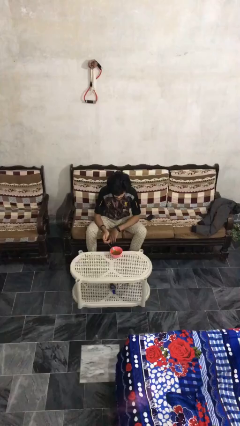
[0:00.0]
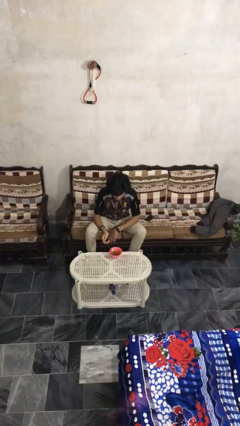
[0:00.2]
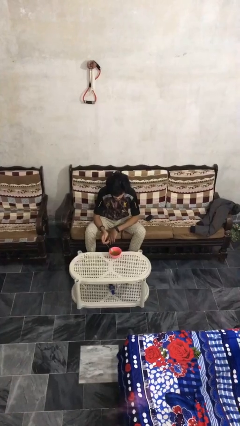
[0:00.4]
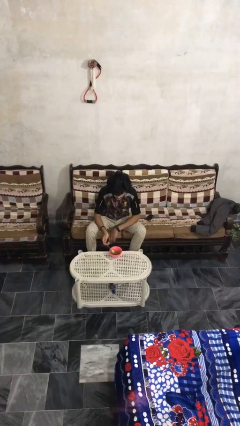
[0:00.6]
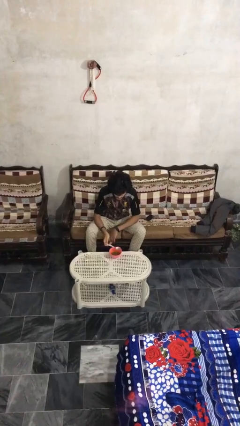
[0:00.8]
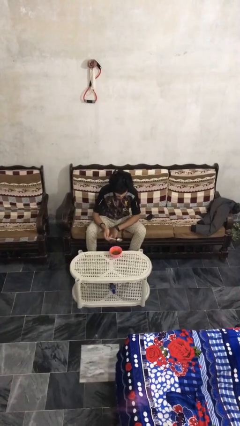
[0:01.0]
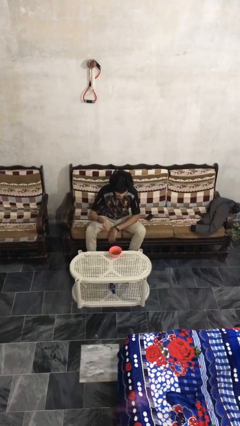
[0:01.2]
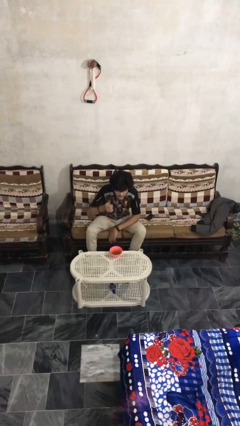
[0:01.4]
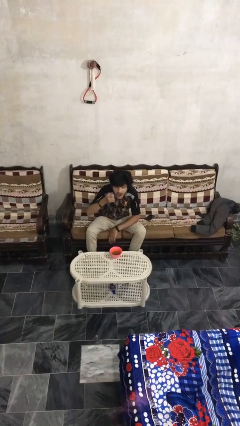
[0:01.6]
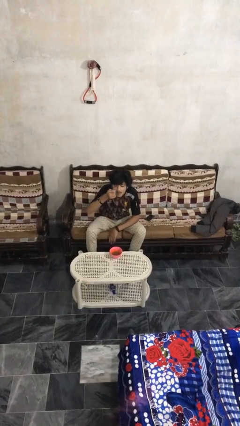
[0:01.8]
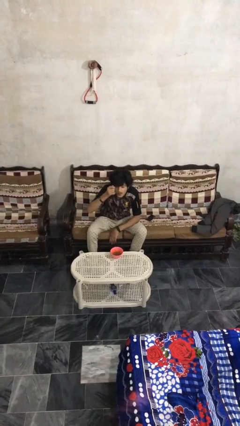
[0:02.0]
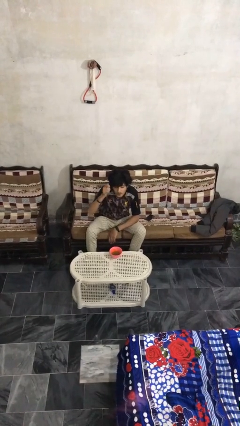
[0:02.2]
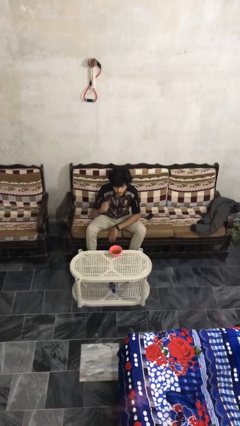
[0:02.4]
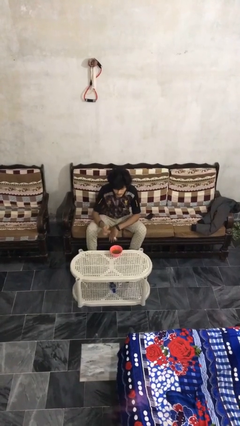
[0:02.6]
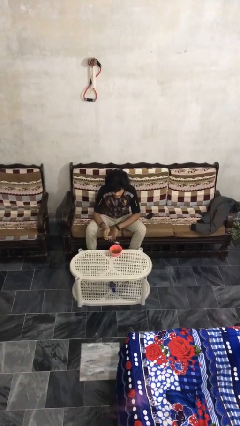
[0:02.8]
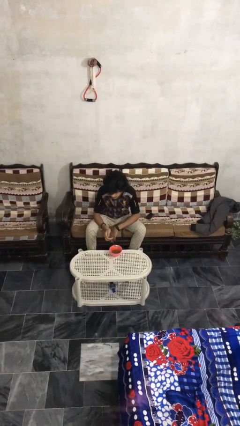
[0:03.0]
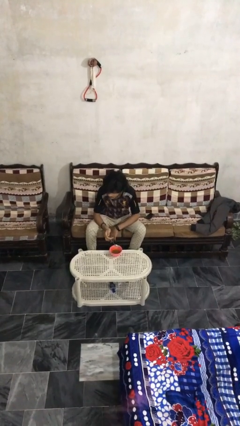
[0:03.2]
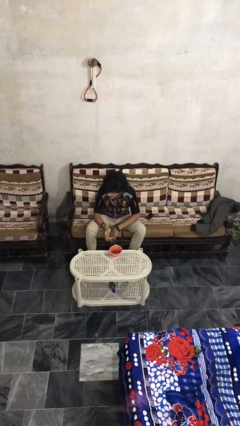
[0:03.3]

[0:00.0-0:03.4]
person eats with utensil

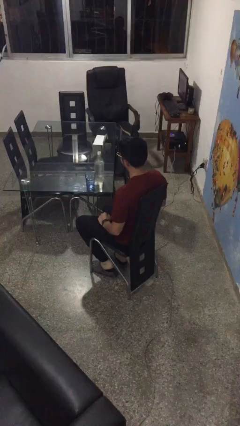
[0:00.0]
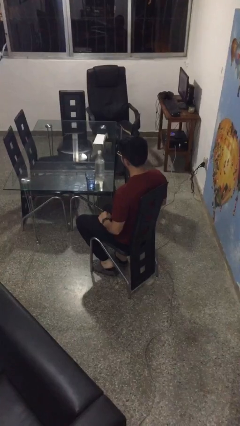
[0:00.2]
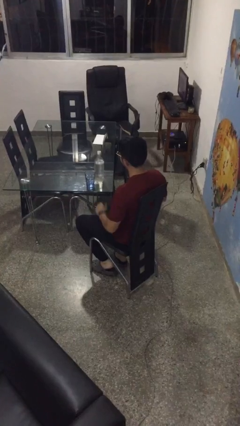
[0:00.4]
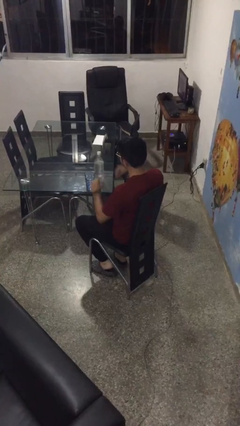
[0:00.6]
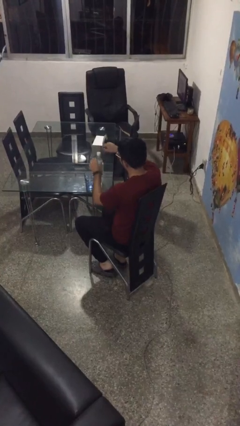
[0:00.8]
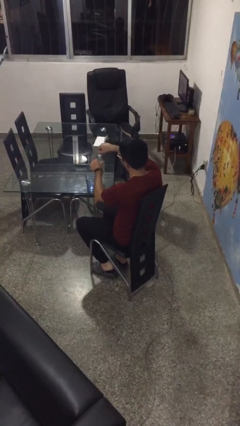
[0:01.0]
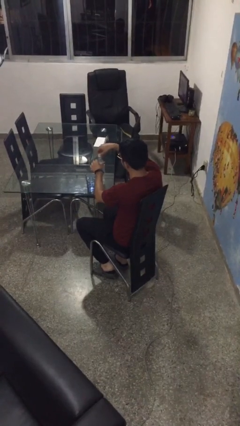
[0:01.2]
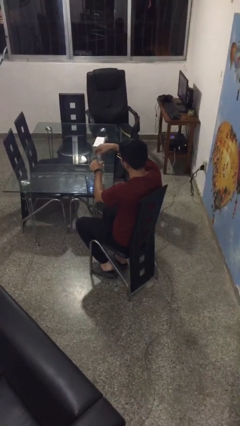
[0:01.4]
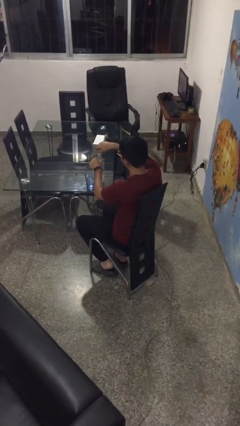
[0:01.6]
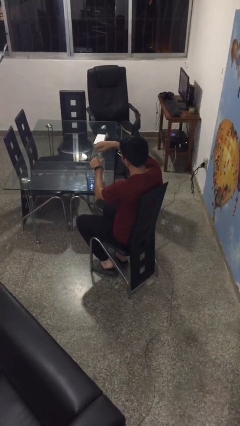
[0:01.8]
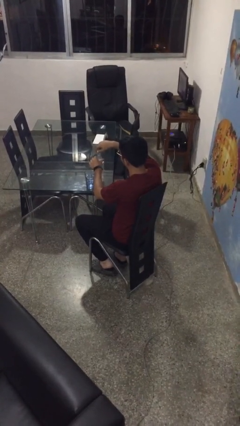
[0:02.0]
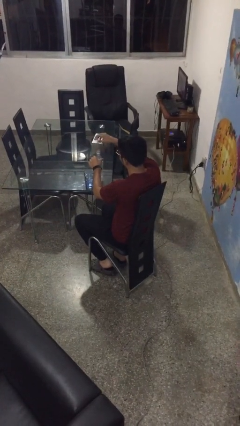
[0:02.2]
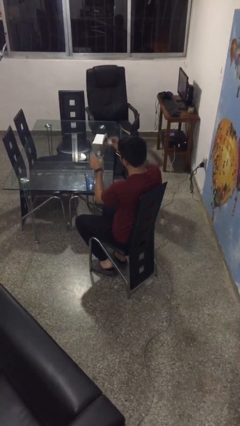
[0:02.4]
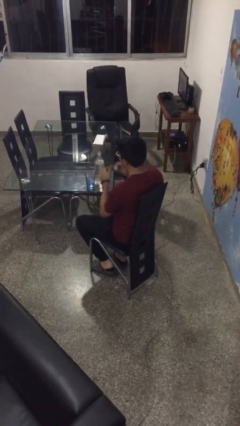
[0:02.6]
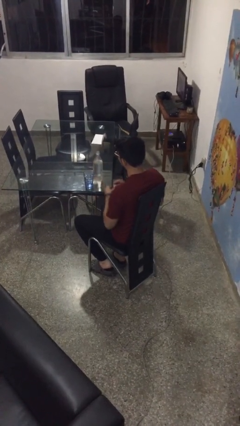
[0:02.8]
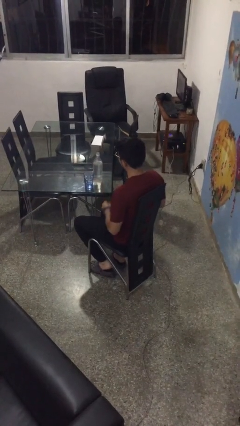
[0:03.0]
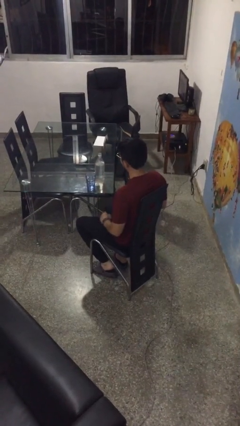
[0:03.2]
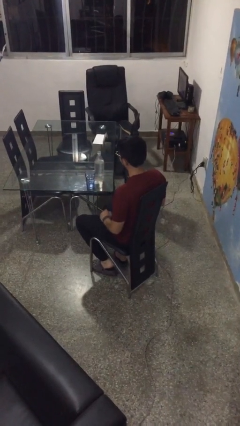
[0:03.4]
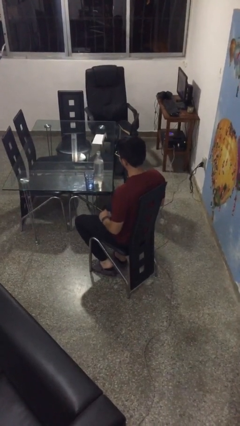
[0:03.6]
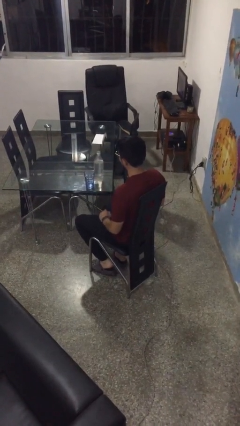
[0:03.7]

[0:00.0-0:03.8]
person unscrews lid from bottle

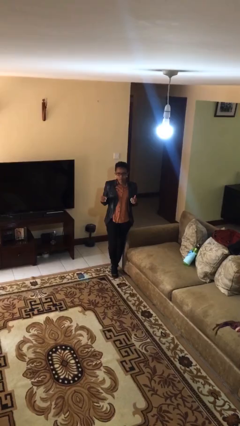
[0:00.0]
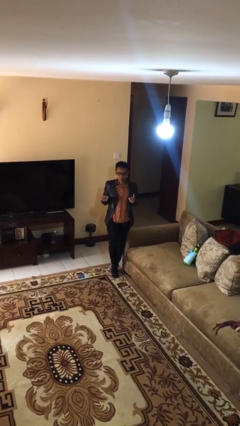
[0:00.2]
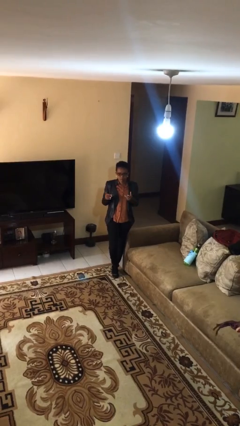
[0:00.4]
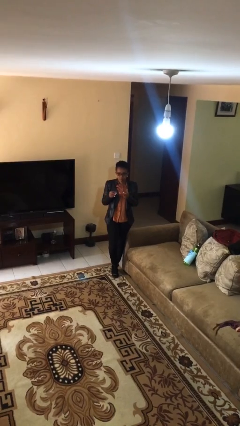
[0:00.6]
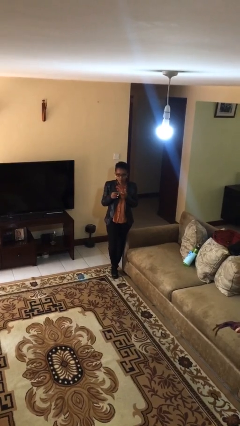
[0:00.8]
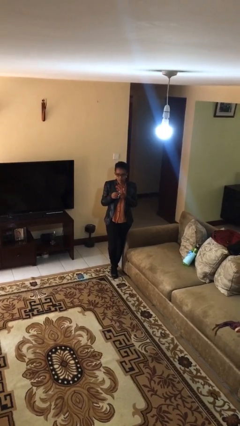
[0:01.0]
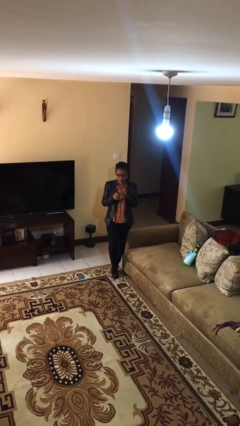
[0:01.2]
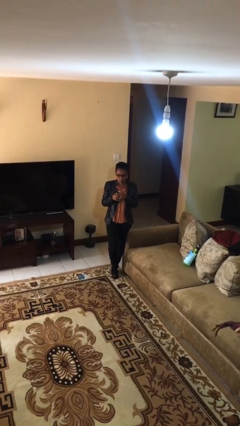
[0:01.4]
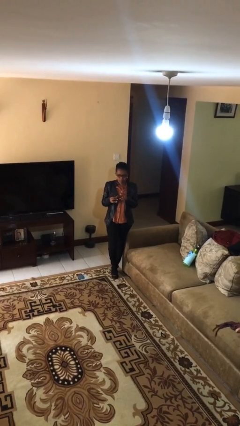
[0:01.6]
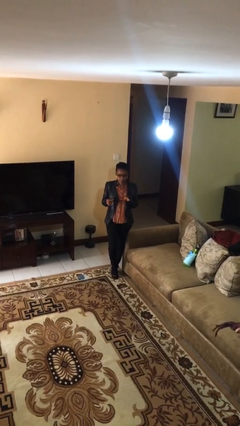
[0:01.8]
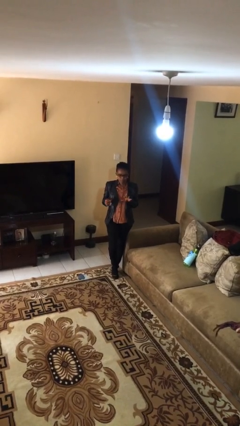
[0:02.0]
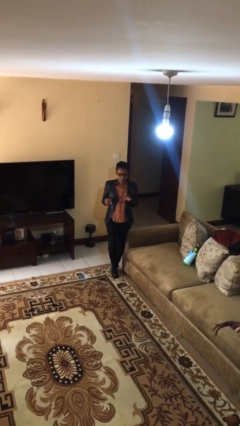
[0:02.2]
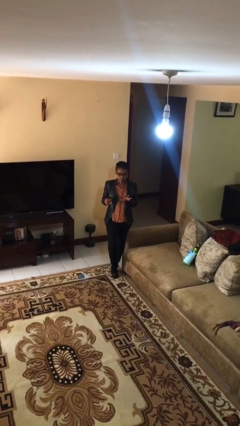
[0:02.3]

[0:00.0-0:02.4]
person puts on ring

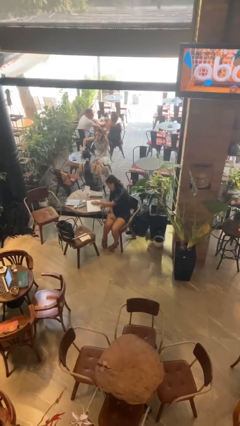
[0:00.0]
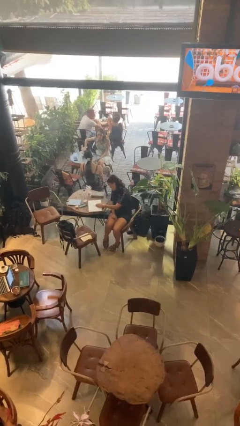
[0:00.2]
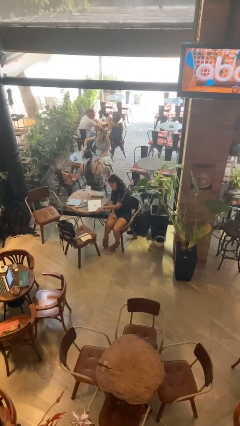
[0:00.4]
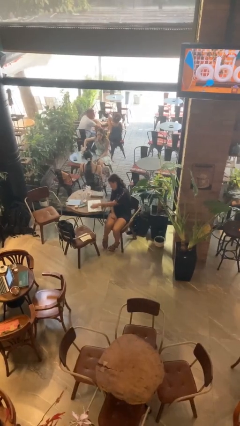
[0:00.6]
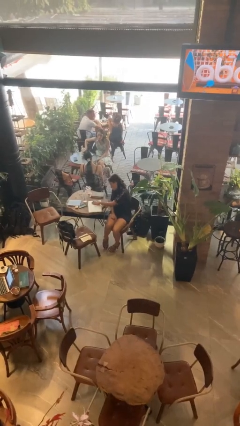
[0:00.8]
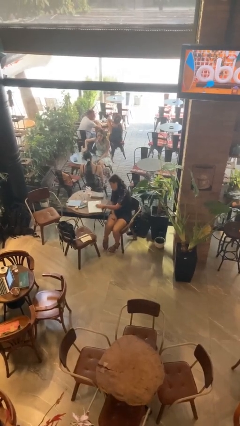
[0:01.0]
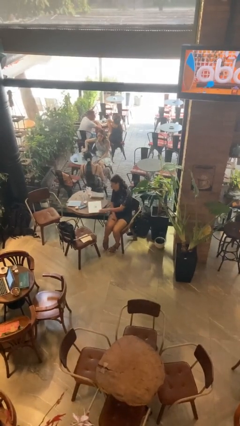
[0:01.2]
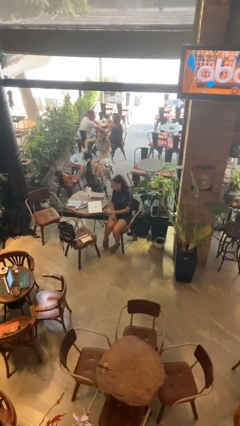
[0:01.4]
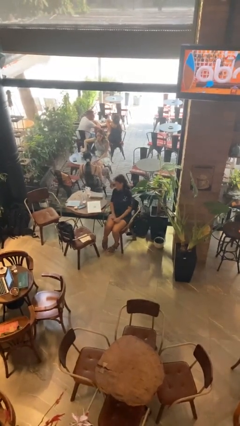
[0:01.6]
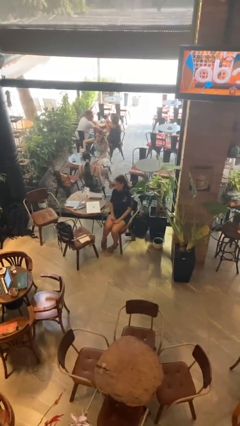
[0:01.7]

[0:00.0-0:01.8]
person waves hand over object

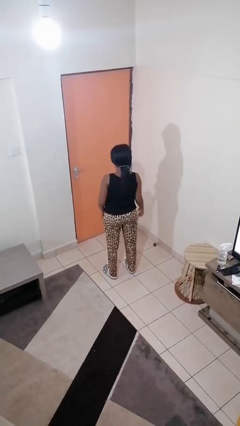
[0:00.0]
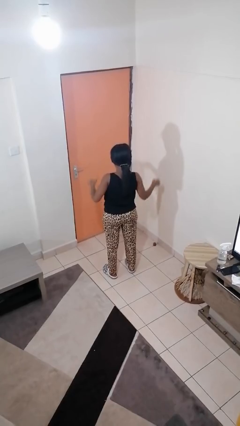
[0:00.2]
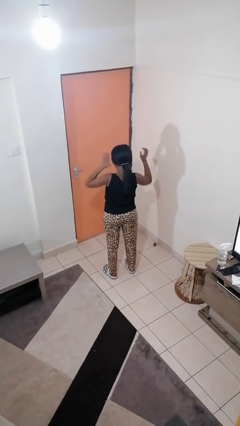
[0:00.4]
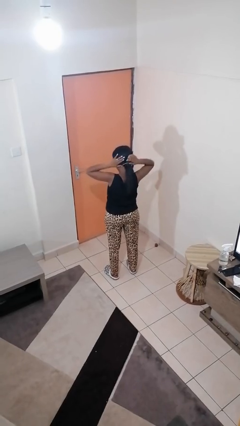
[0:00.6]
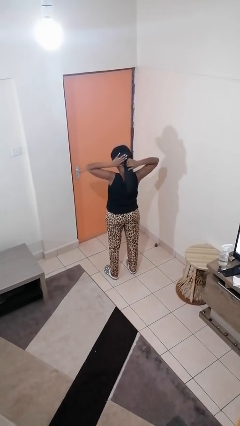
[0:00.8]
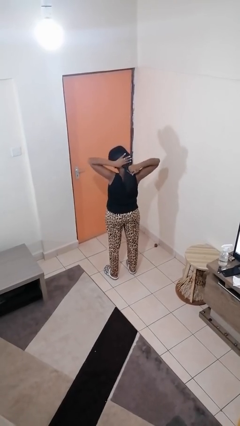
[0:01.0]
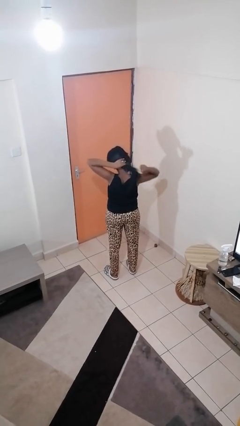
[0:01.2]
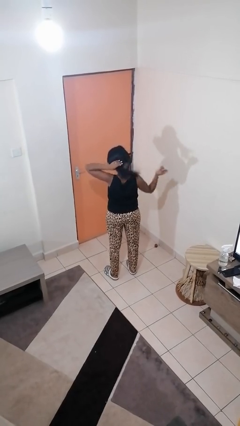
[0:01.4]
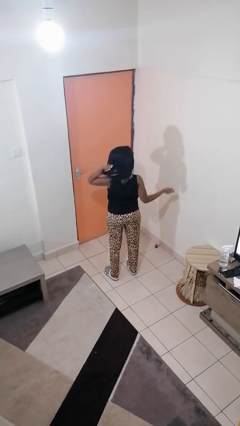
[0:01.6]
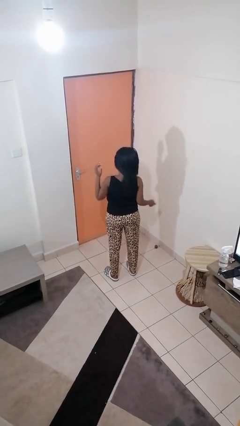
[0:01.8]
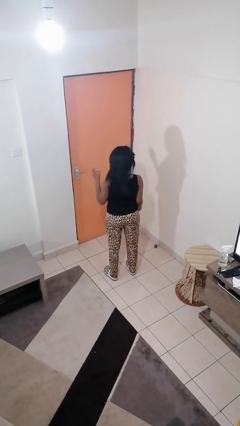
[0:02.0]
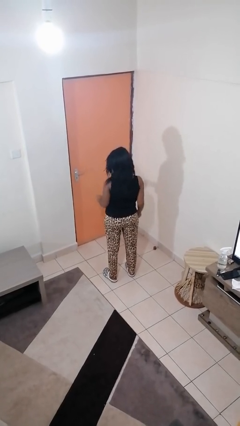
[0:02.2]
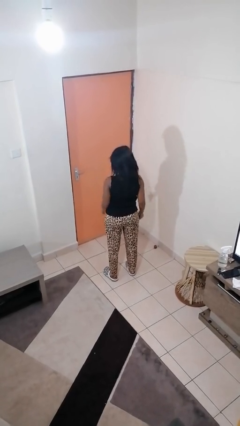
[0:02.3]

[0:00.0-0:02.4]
person takes off hairtie

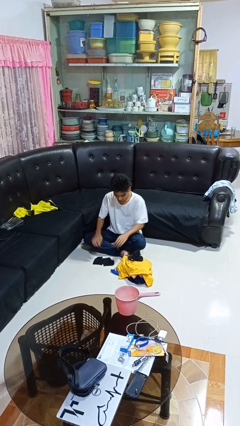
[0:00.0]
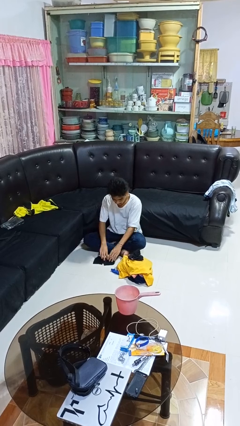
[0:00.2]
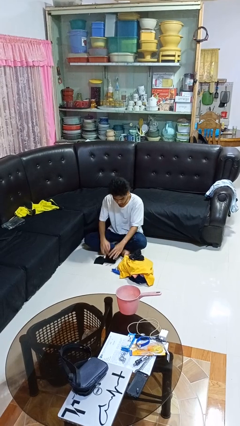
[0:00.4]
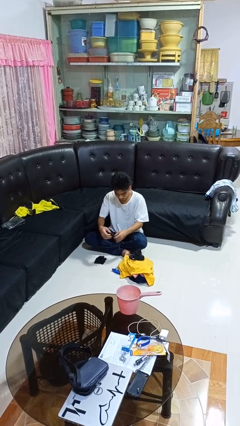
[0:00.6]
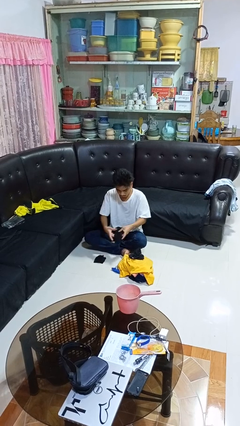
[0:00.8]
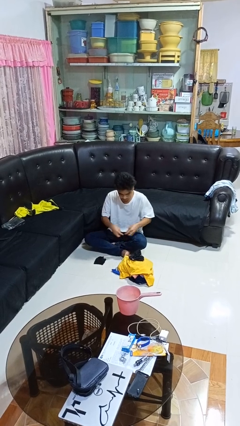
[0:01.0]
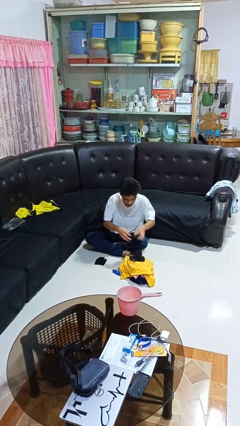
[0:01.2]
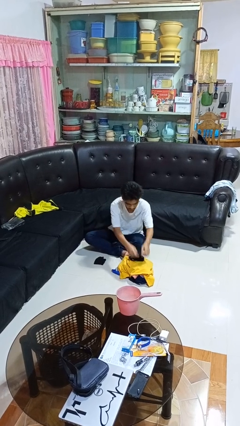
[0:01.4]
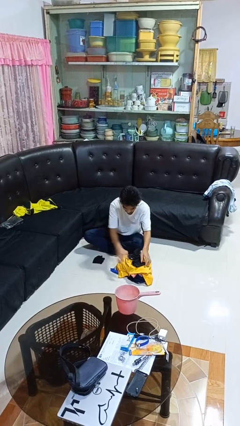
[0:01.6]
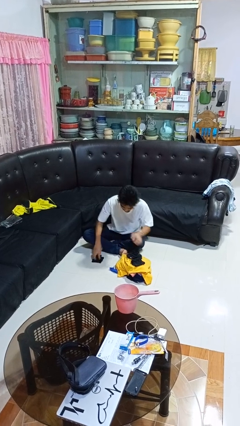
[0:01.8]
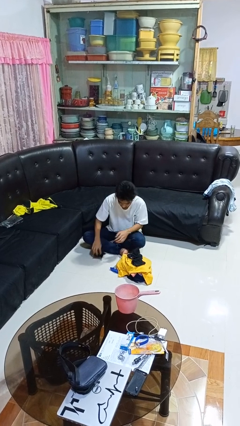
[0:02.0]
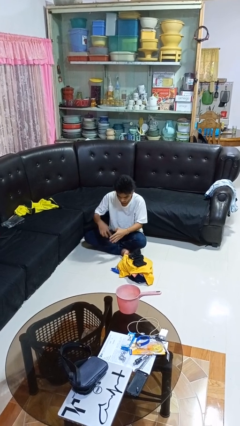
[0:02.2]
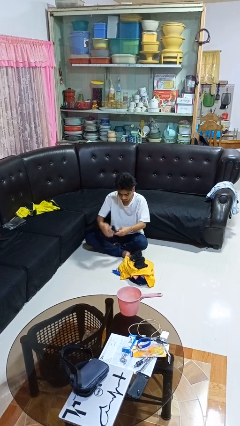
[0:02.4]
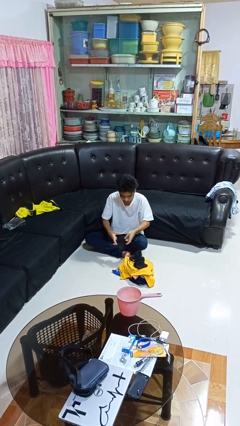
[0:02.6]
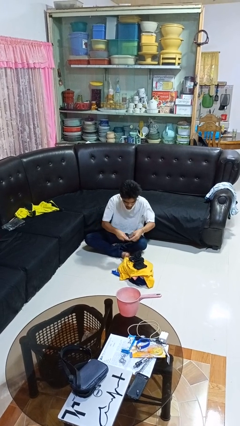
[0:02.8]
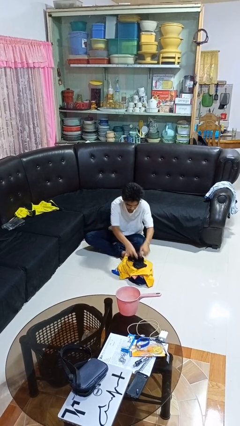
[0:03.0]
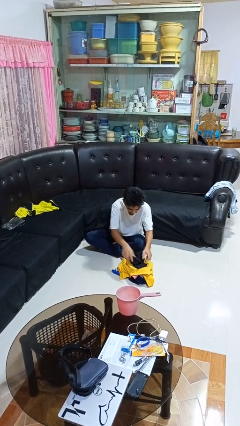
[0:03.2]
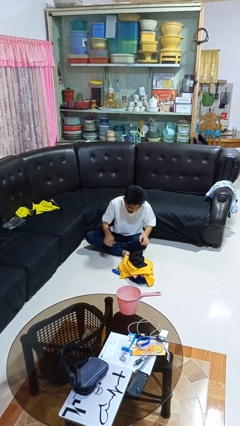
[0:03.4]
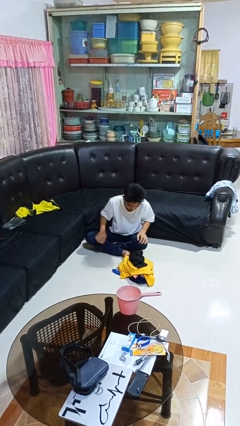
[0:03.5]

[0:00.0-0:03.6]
person folds socks
